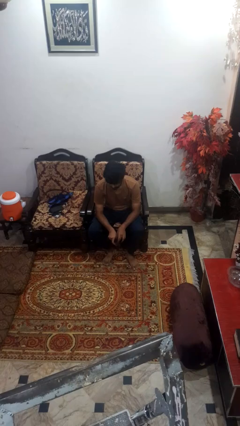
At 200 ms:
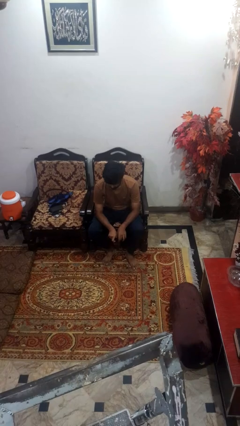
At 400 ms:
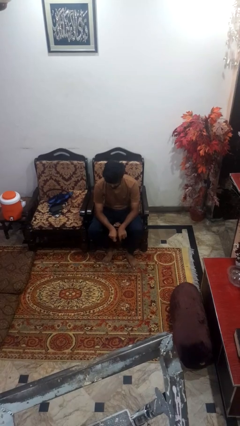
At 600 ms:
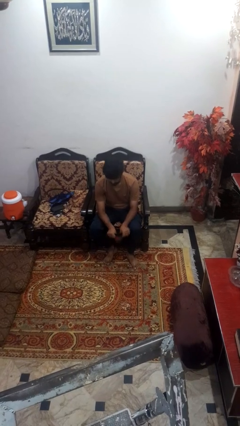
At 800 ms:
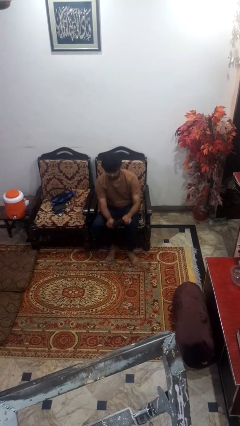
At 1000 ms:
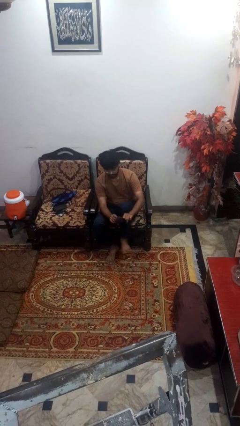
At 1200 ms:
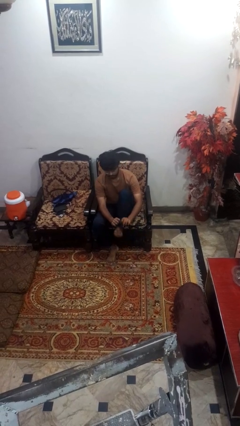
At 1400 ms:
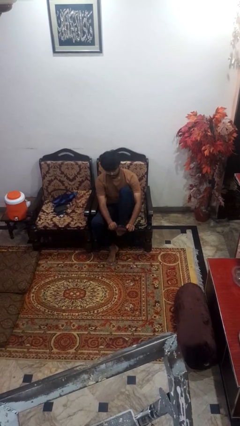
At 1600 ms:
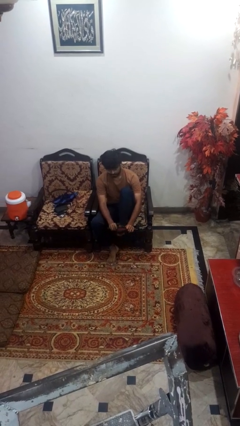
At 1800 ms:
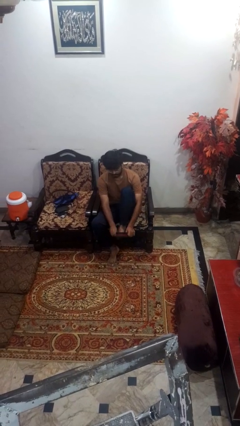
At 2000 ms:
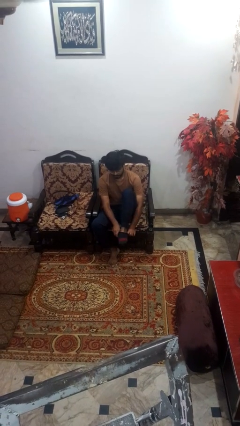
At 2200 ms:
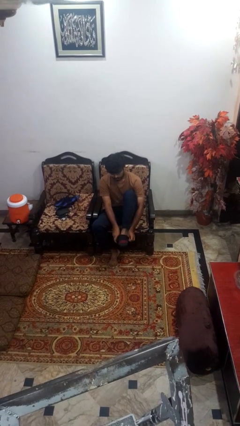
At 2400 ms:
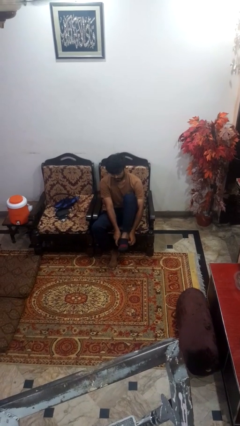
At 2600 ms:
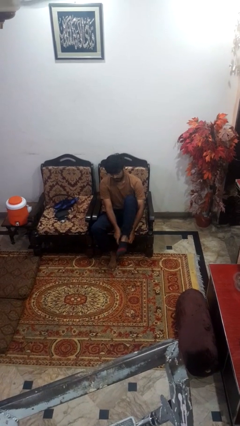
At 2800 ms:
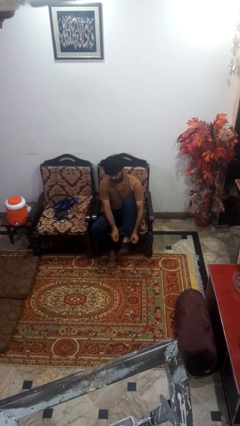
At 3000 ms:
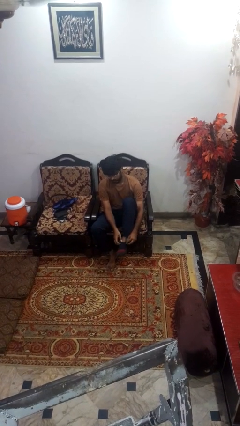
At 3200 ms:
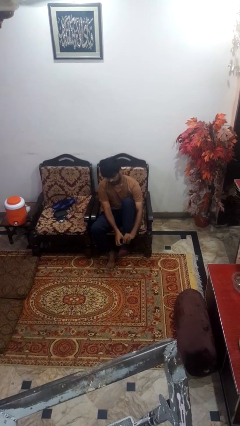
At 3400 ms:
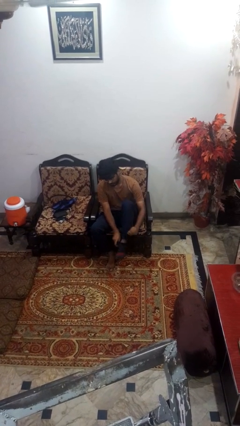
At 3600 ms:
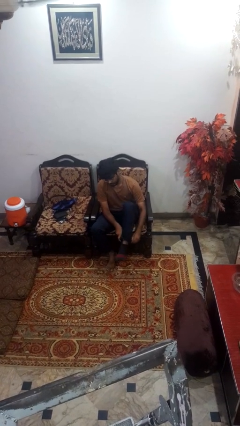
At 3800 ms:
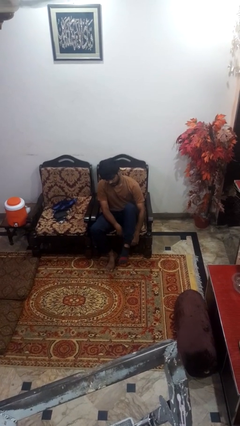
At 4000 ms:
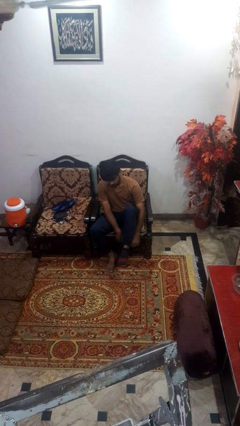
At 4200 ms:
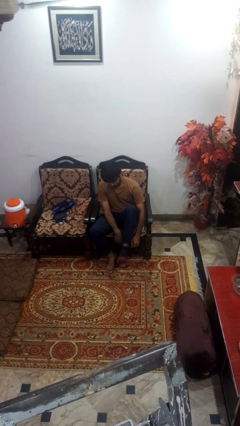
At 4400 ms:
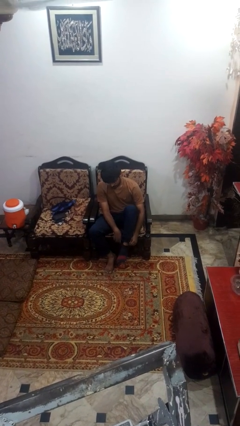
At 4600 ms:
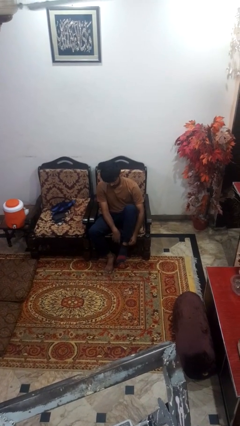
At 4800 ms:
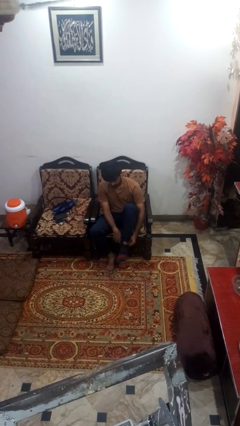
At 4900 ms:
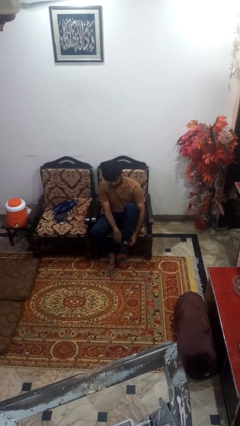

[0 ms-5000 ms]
person puts on socks

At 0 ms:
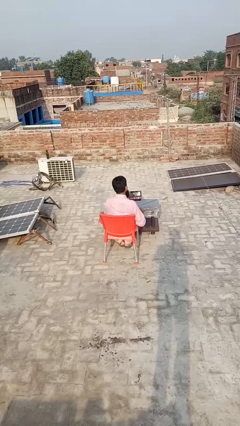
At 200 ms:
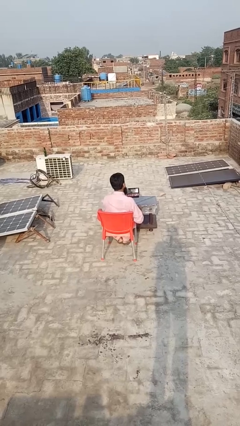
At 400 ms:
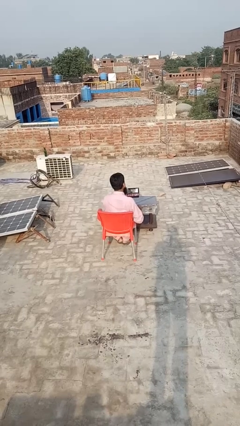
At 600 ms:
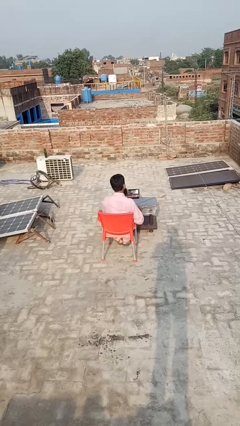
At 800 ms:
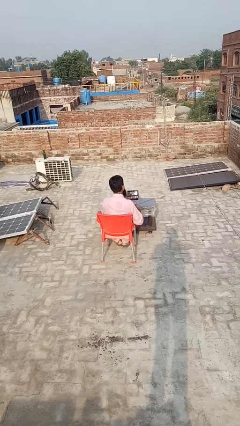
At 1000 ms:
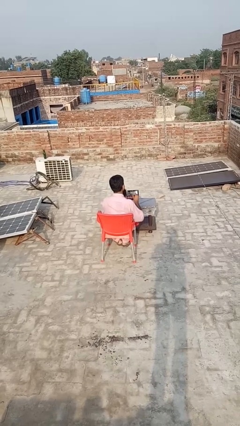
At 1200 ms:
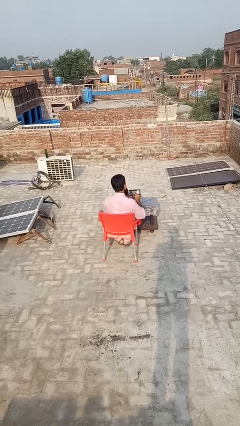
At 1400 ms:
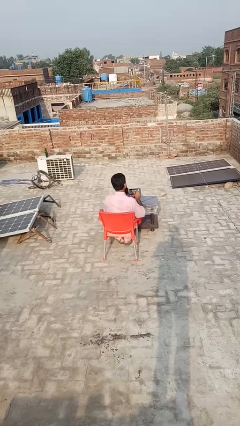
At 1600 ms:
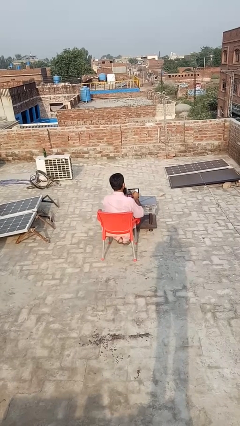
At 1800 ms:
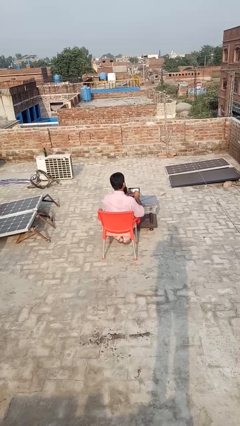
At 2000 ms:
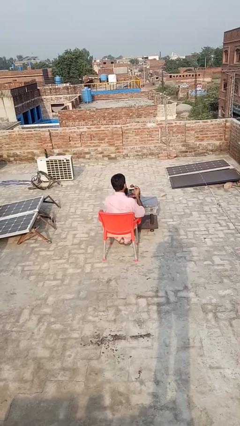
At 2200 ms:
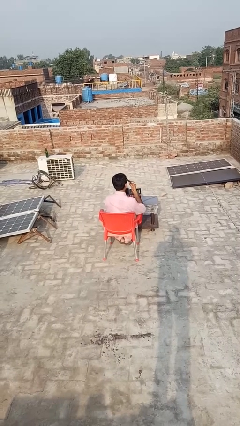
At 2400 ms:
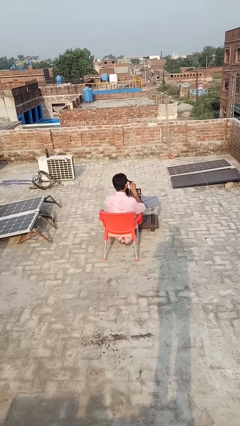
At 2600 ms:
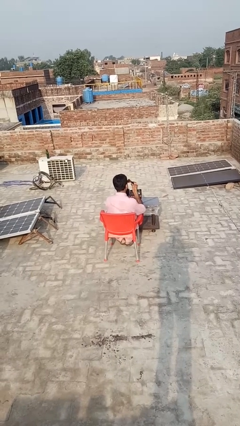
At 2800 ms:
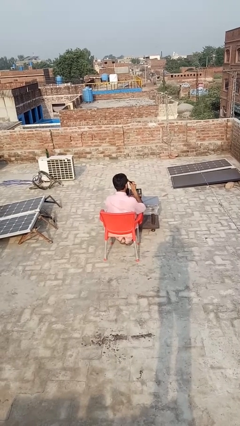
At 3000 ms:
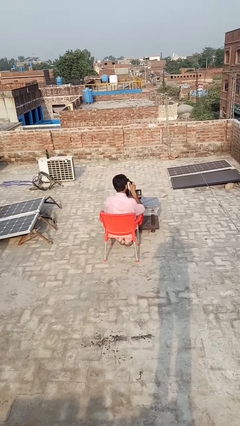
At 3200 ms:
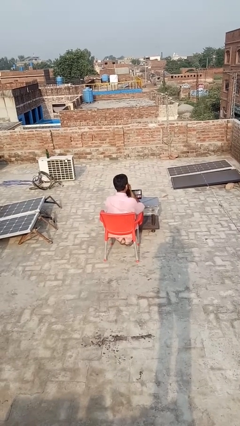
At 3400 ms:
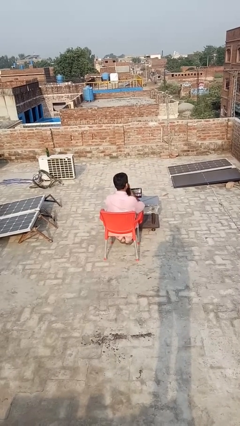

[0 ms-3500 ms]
person applies eye makeup

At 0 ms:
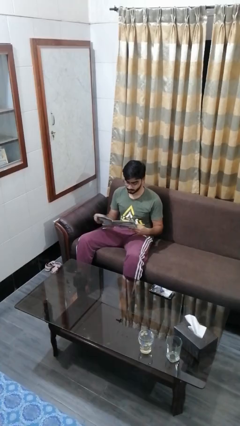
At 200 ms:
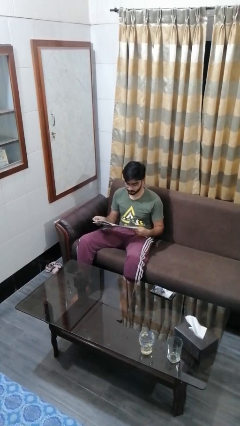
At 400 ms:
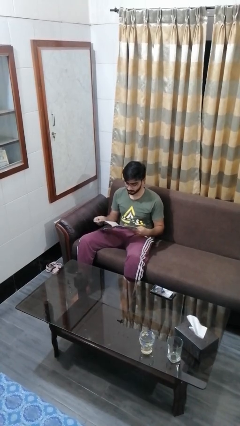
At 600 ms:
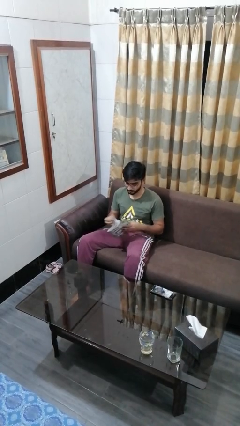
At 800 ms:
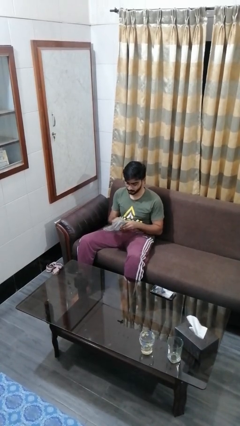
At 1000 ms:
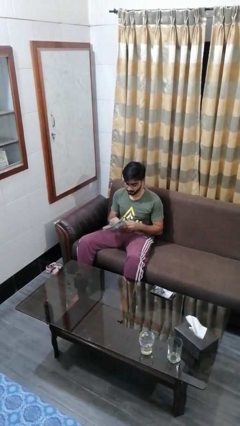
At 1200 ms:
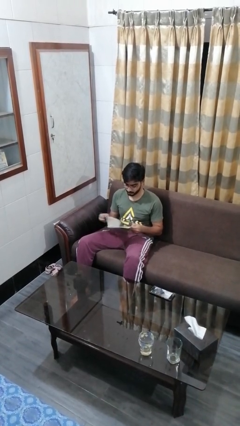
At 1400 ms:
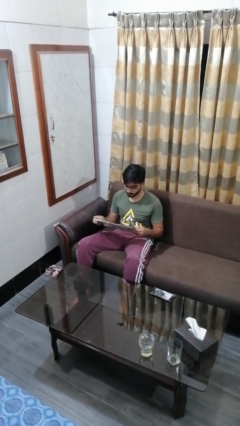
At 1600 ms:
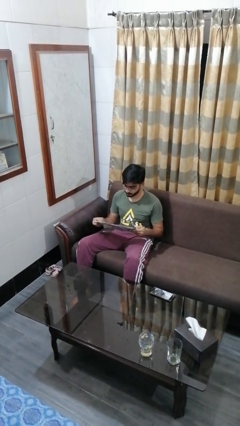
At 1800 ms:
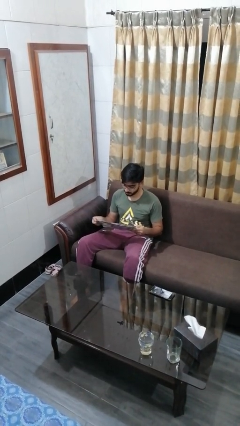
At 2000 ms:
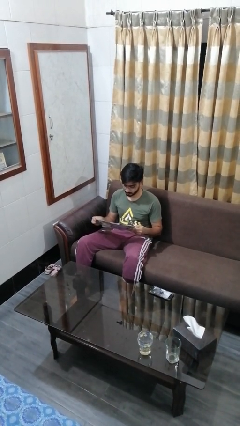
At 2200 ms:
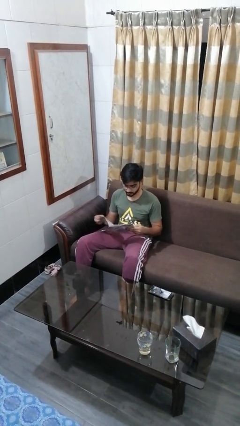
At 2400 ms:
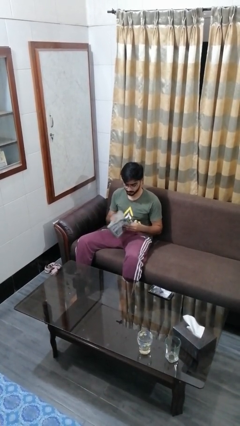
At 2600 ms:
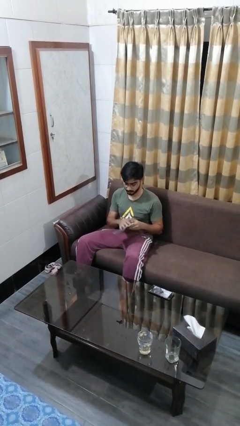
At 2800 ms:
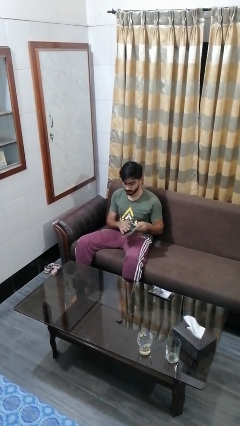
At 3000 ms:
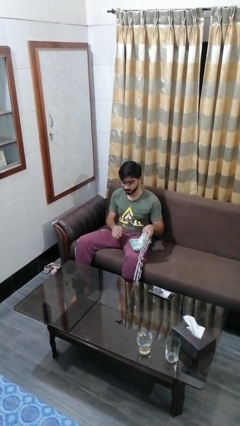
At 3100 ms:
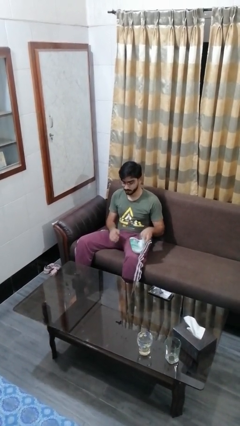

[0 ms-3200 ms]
person reads magazine

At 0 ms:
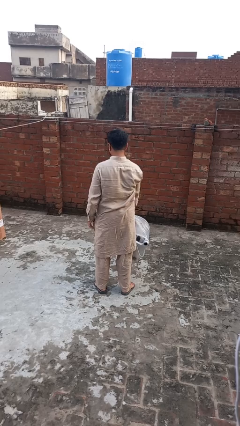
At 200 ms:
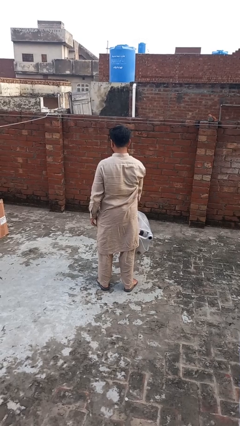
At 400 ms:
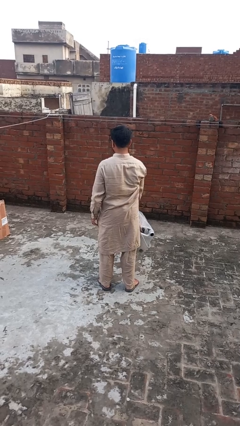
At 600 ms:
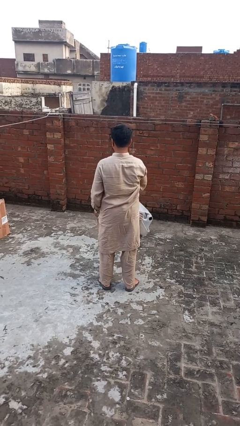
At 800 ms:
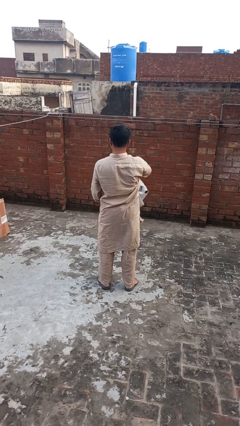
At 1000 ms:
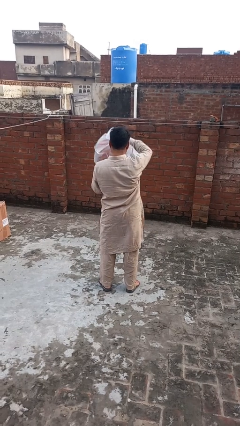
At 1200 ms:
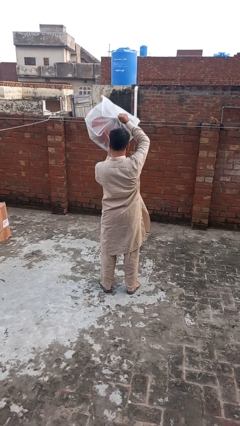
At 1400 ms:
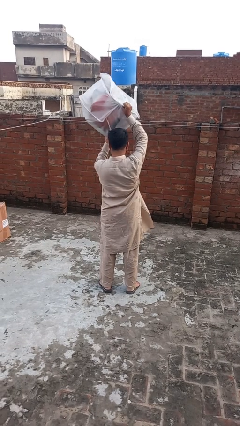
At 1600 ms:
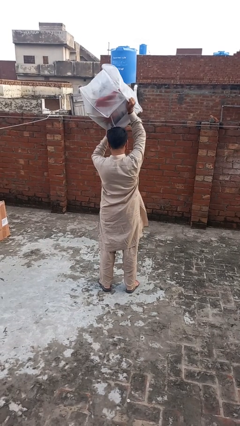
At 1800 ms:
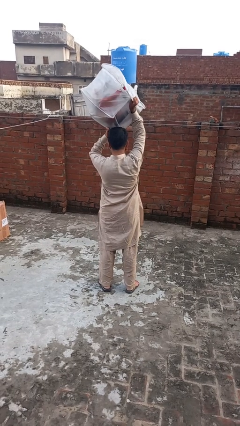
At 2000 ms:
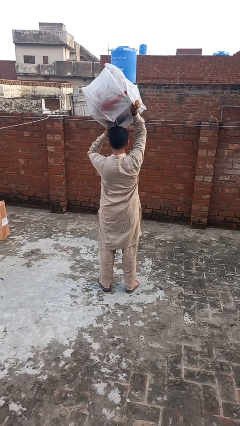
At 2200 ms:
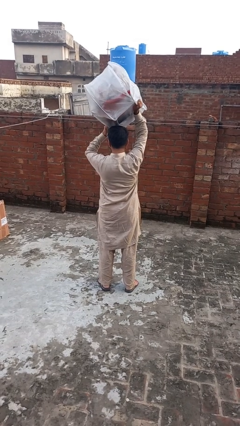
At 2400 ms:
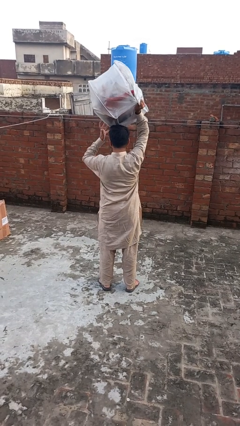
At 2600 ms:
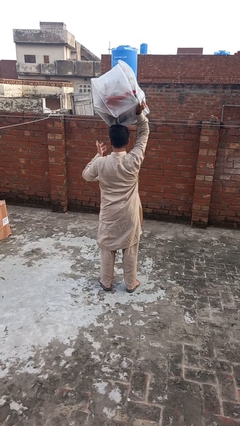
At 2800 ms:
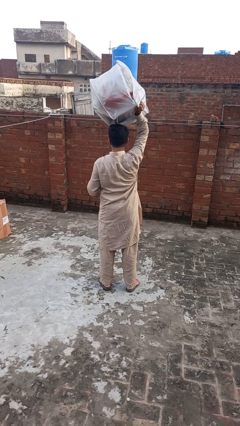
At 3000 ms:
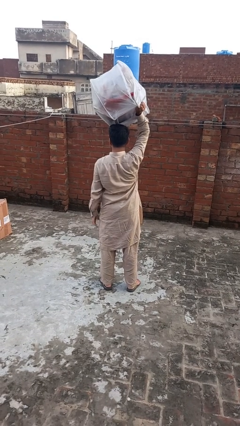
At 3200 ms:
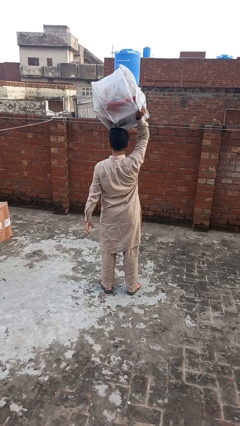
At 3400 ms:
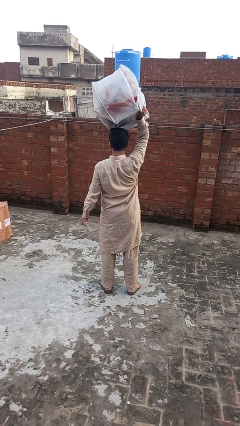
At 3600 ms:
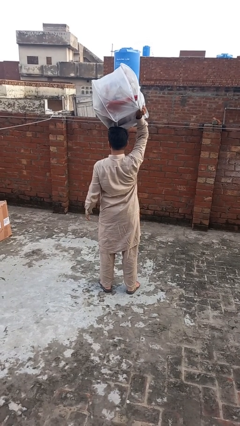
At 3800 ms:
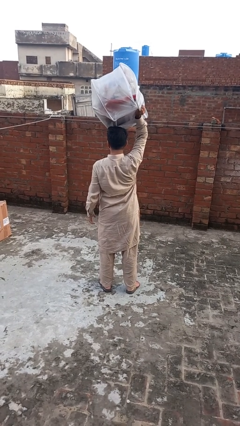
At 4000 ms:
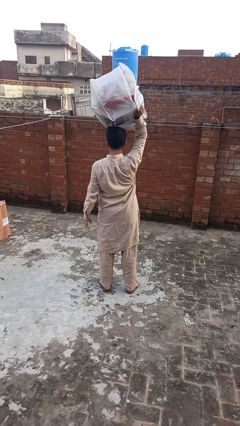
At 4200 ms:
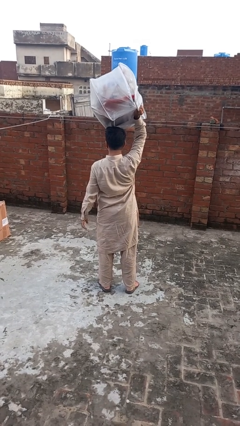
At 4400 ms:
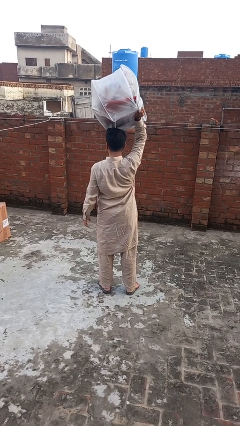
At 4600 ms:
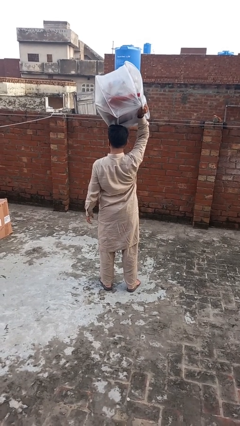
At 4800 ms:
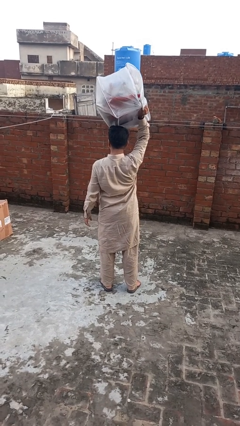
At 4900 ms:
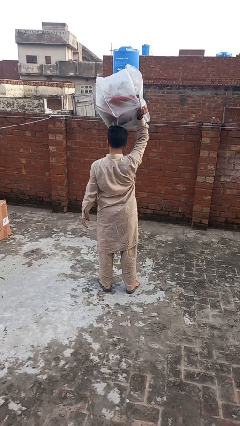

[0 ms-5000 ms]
person holds object above head

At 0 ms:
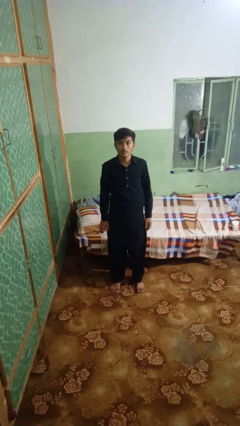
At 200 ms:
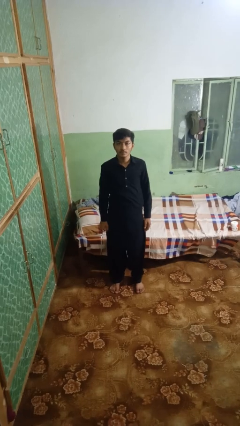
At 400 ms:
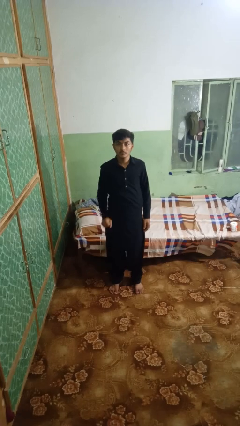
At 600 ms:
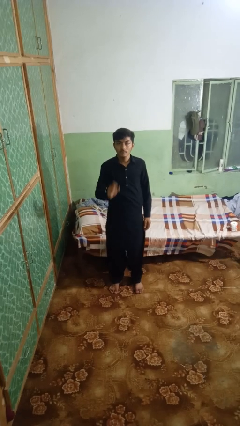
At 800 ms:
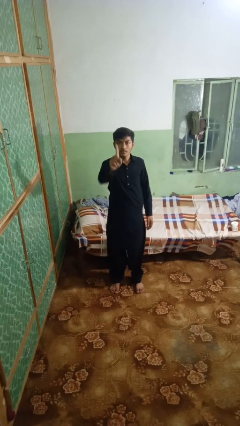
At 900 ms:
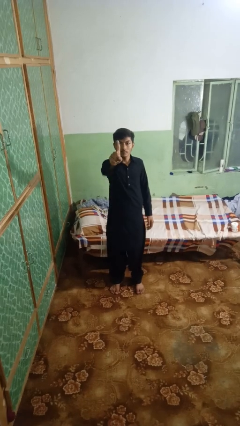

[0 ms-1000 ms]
person gestures number one
